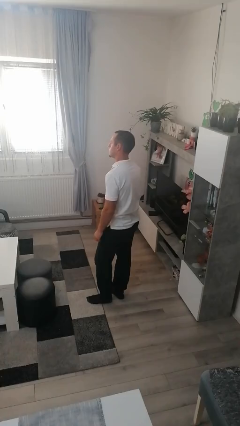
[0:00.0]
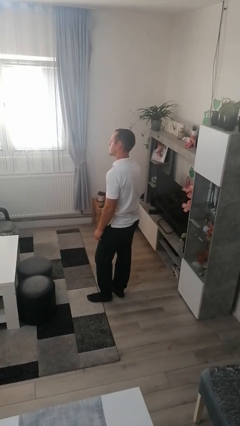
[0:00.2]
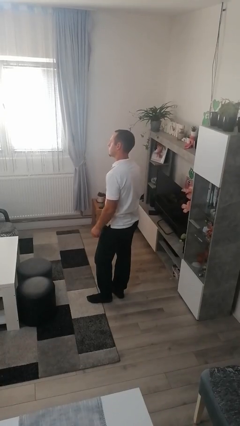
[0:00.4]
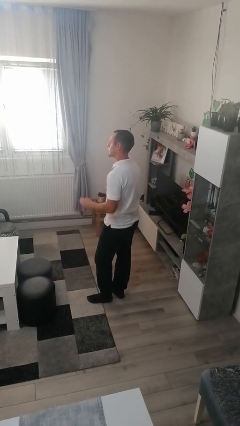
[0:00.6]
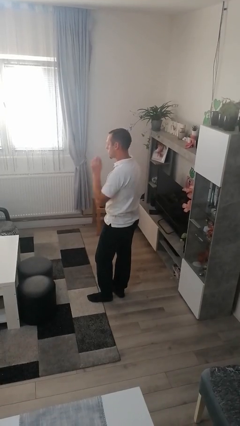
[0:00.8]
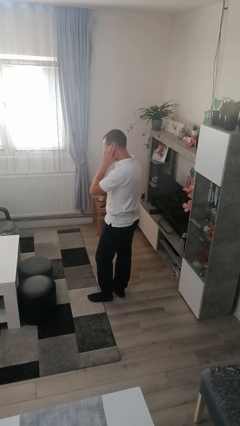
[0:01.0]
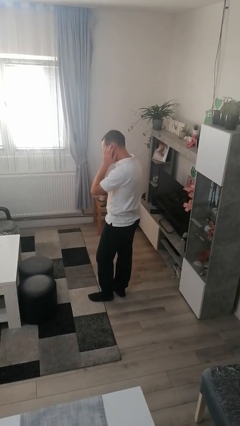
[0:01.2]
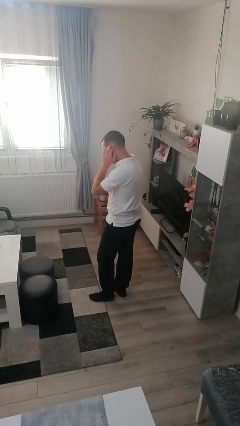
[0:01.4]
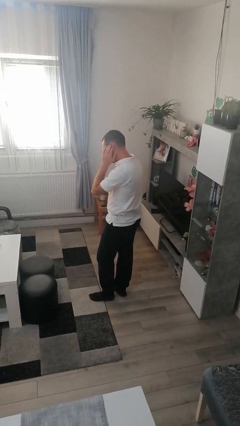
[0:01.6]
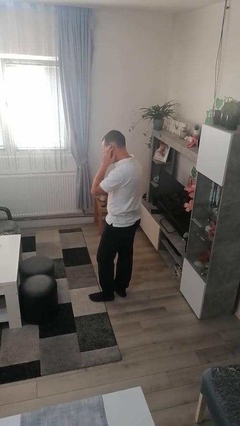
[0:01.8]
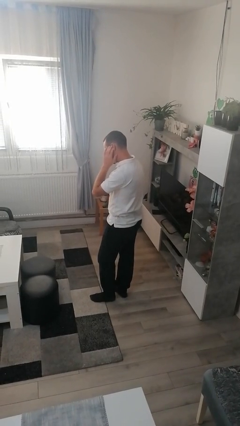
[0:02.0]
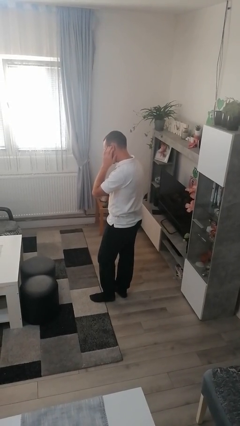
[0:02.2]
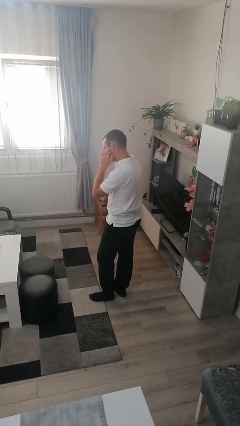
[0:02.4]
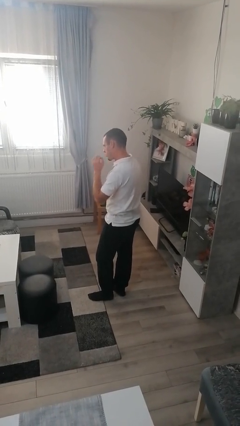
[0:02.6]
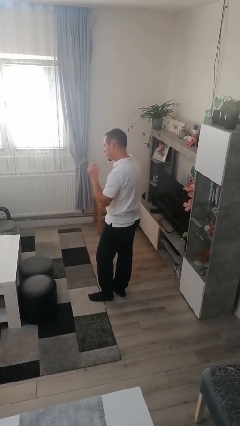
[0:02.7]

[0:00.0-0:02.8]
person touches earlobe

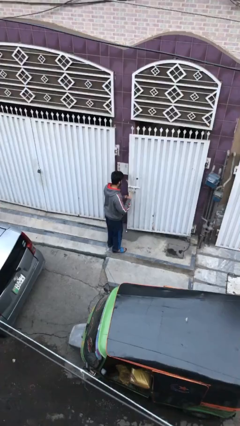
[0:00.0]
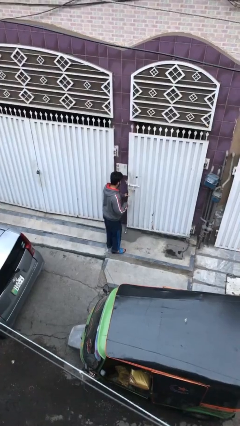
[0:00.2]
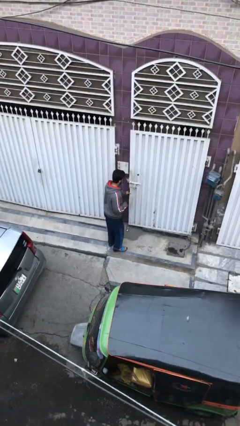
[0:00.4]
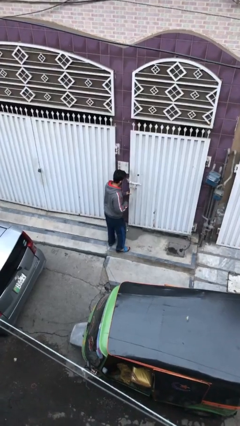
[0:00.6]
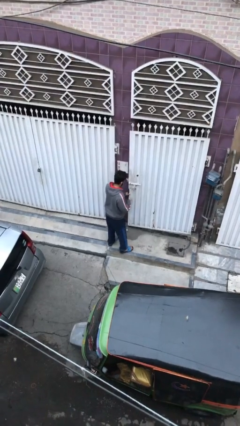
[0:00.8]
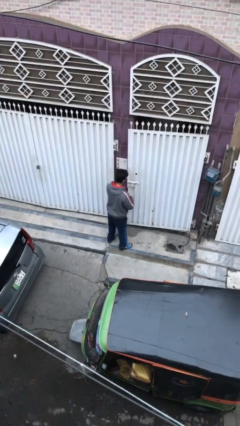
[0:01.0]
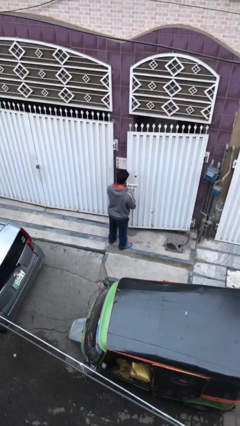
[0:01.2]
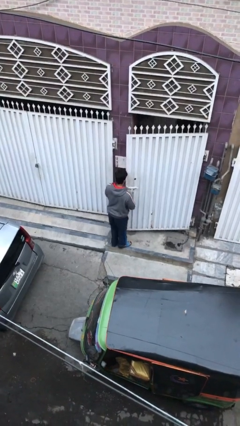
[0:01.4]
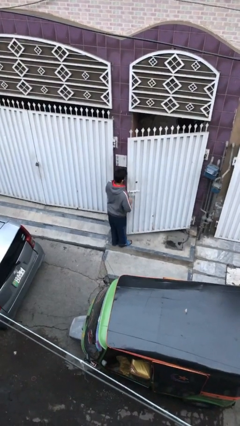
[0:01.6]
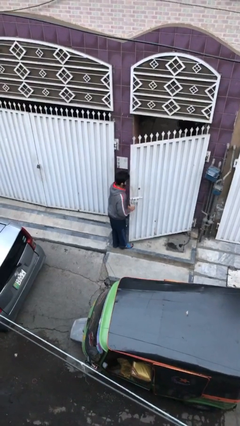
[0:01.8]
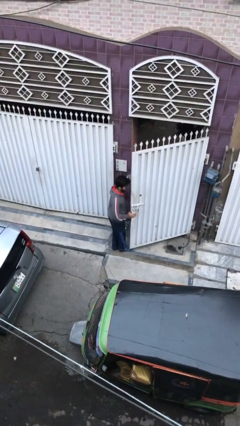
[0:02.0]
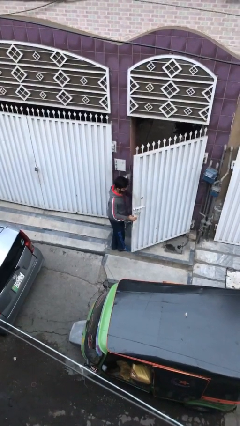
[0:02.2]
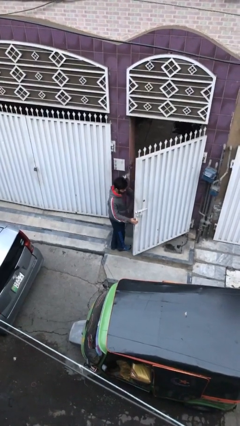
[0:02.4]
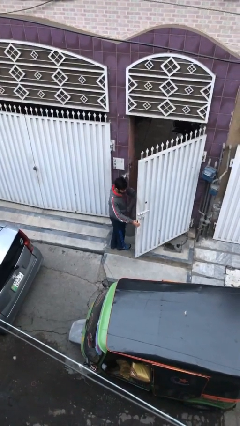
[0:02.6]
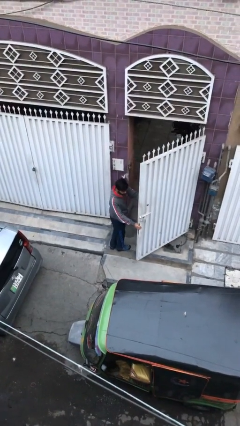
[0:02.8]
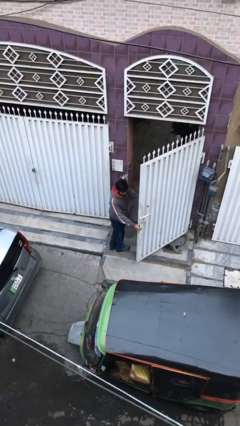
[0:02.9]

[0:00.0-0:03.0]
person opens facility door

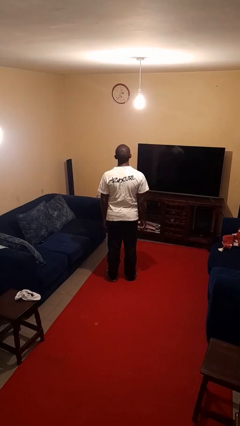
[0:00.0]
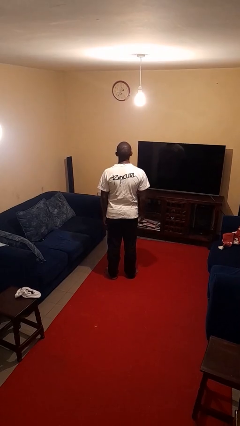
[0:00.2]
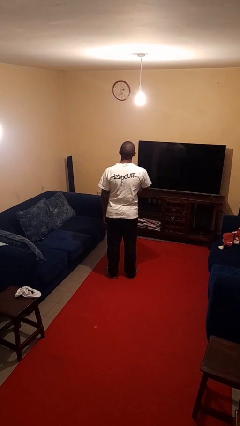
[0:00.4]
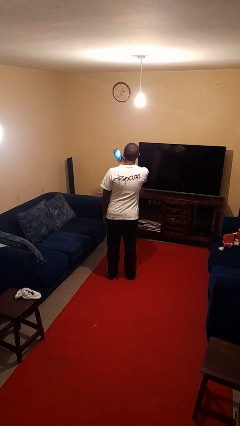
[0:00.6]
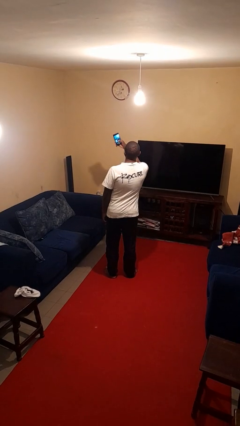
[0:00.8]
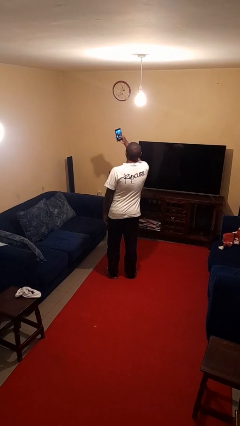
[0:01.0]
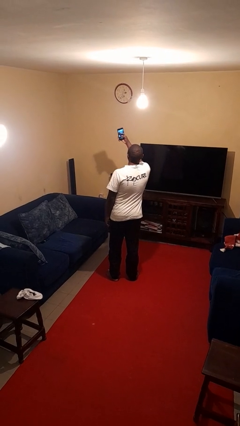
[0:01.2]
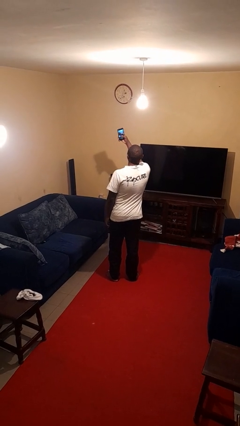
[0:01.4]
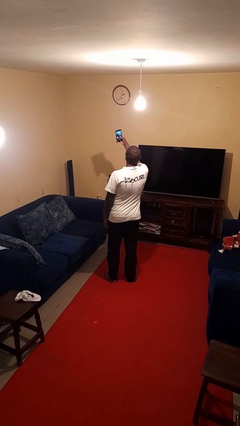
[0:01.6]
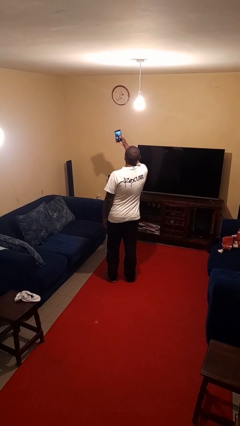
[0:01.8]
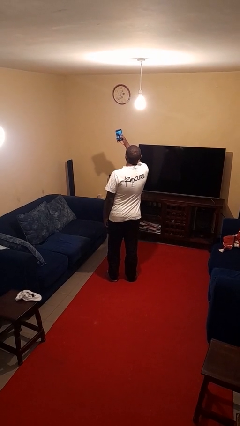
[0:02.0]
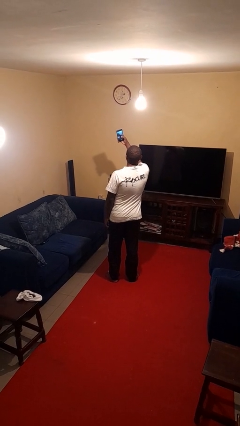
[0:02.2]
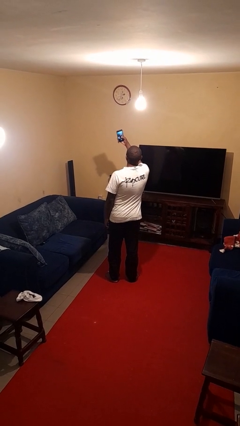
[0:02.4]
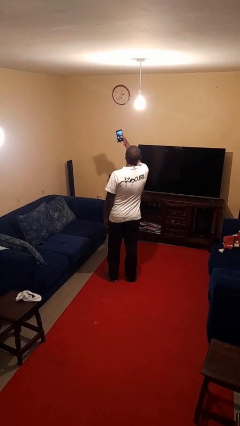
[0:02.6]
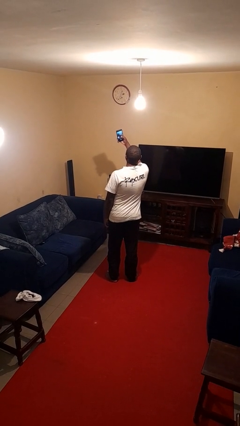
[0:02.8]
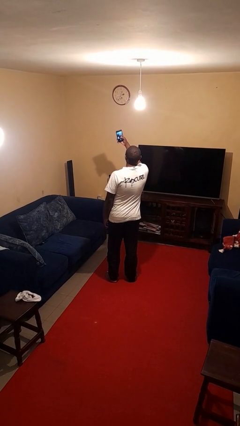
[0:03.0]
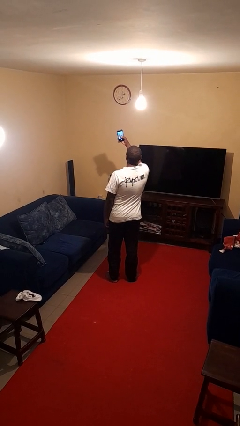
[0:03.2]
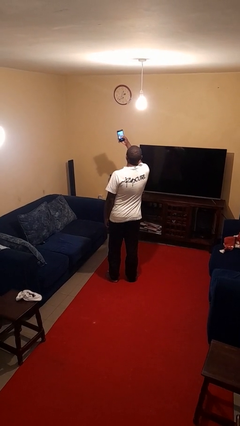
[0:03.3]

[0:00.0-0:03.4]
person takes selfie

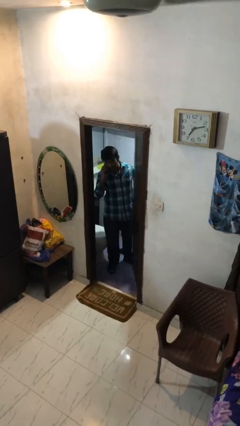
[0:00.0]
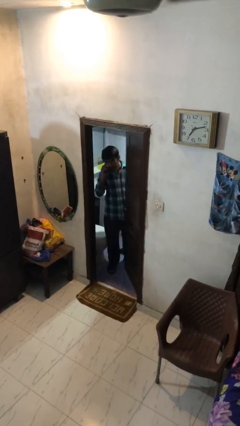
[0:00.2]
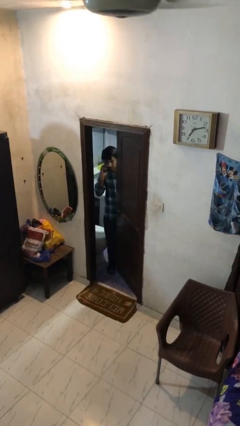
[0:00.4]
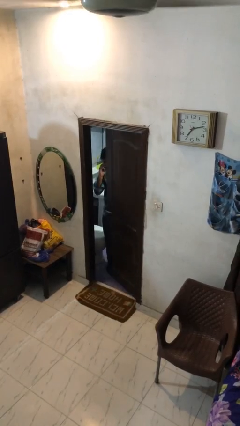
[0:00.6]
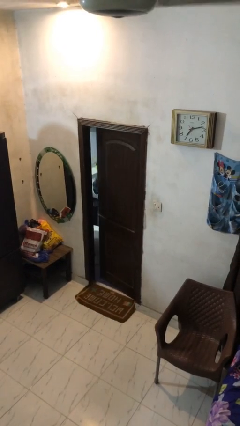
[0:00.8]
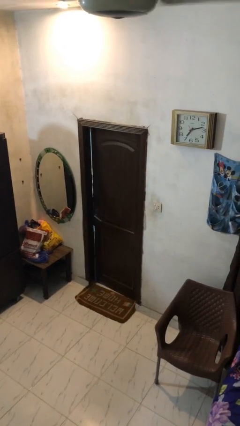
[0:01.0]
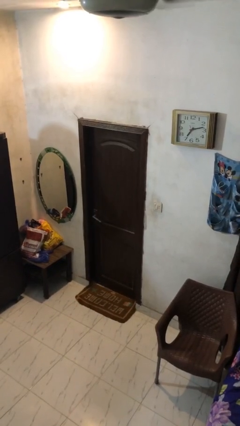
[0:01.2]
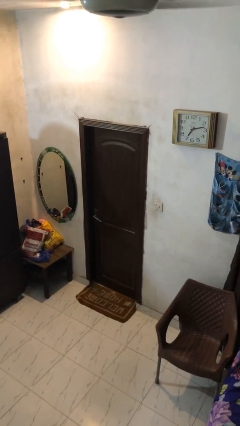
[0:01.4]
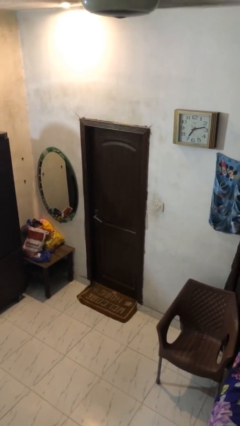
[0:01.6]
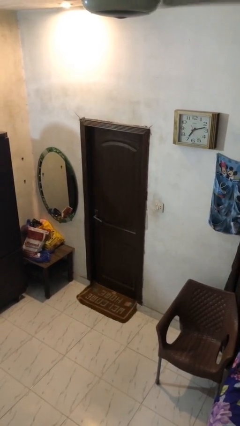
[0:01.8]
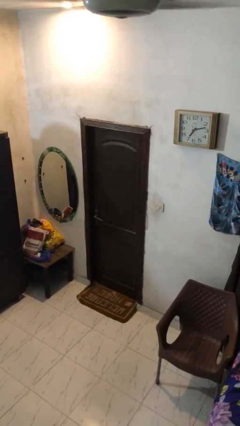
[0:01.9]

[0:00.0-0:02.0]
person closes facility door

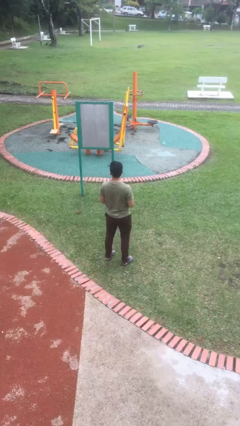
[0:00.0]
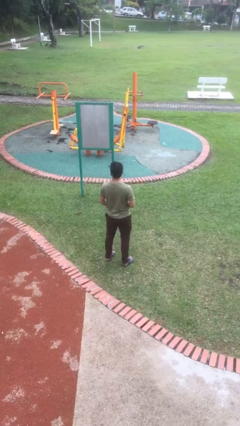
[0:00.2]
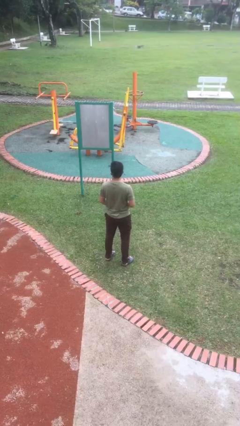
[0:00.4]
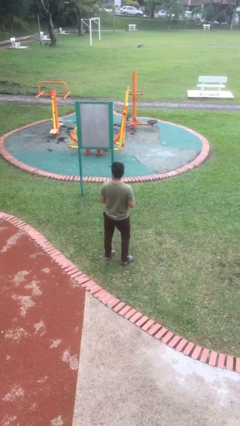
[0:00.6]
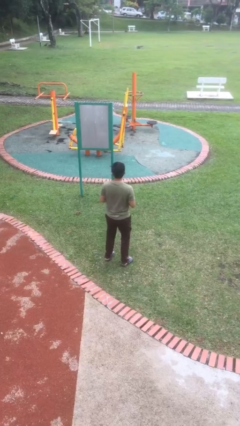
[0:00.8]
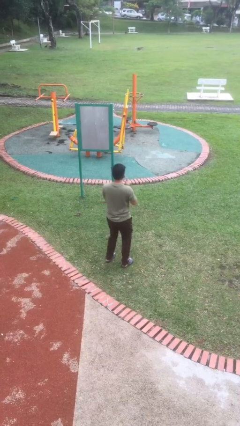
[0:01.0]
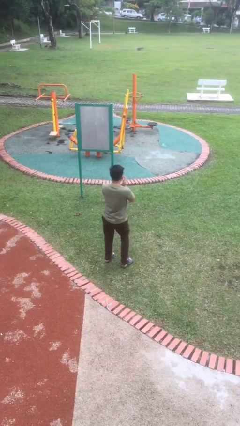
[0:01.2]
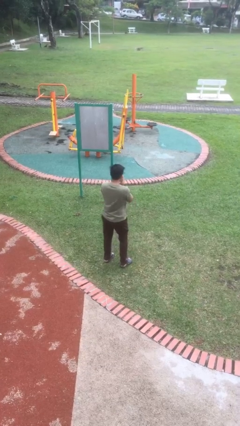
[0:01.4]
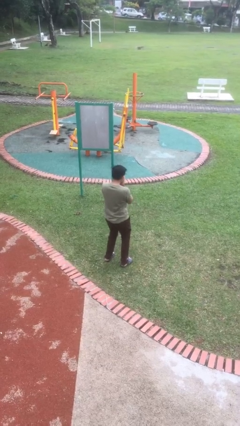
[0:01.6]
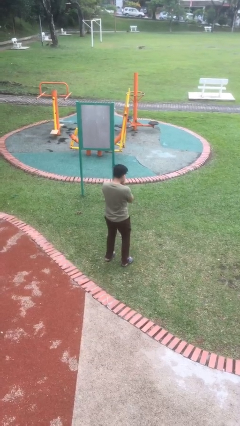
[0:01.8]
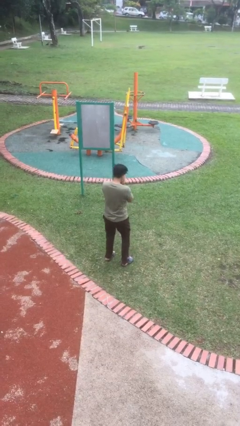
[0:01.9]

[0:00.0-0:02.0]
person wiggles hips

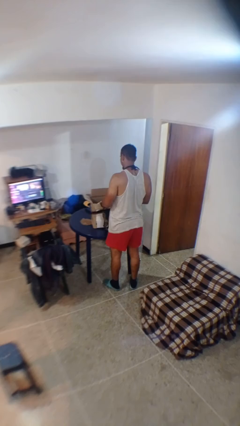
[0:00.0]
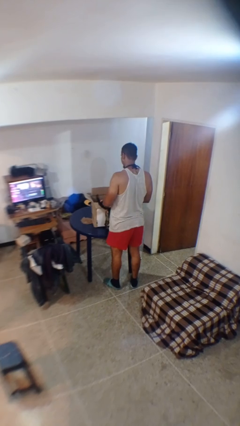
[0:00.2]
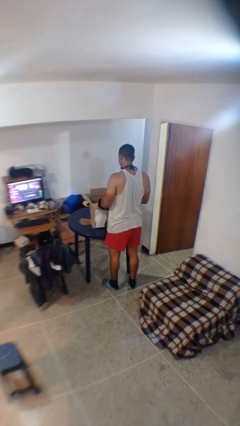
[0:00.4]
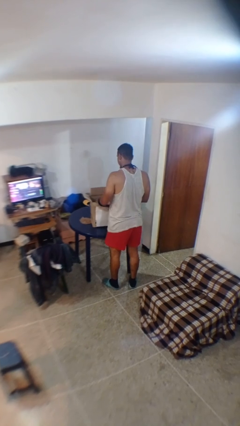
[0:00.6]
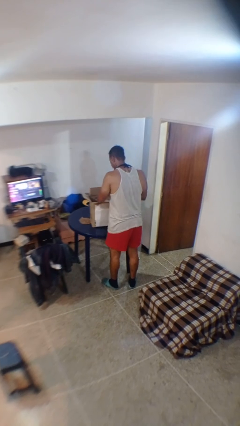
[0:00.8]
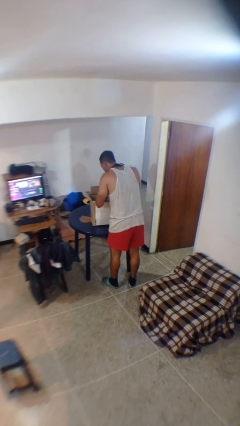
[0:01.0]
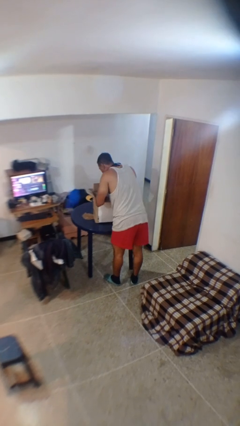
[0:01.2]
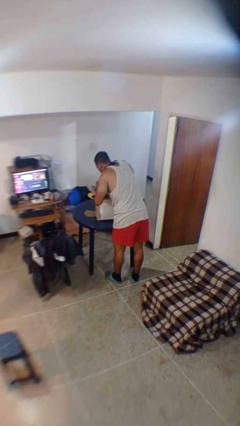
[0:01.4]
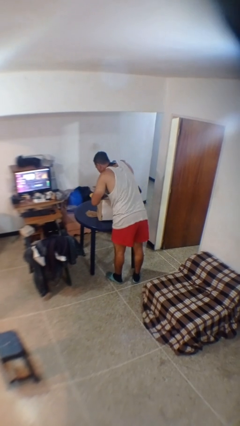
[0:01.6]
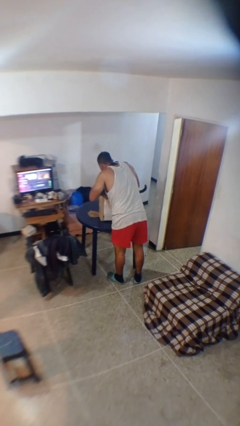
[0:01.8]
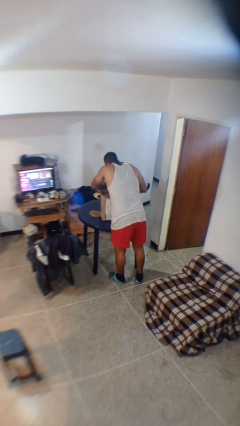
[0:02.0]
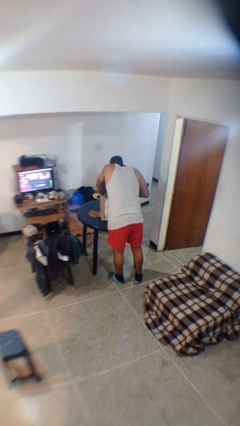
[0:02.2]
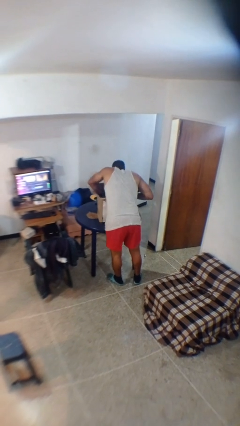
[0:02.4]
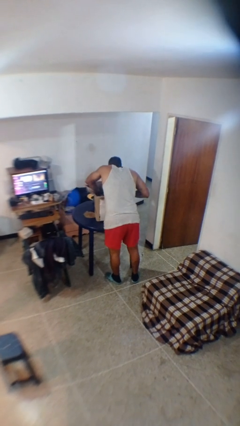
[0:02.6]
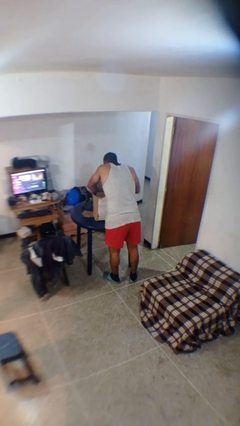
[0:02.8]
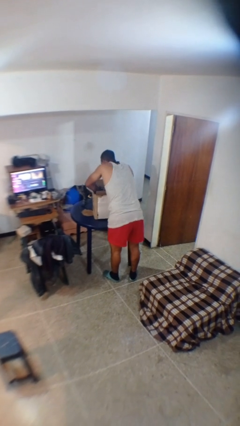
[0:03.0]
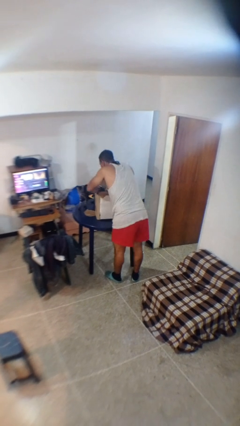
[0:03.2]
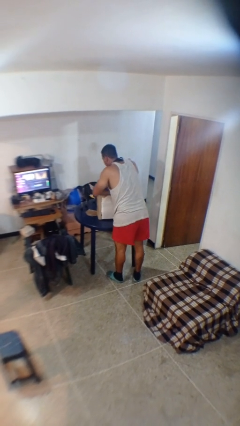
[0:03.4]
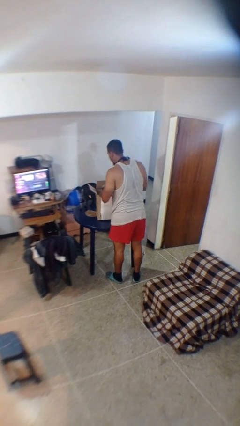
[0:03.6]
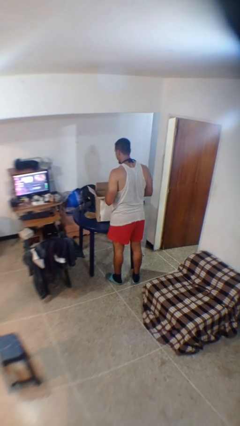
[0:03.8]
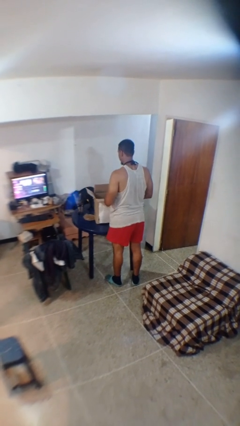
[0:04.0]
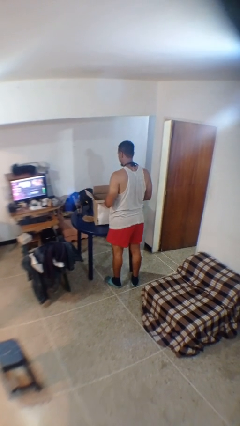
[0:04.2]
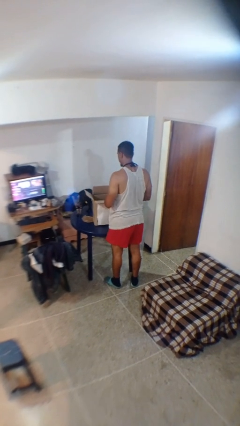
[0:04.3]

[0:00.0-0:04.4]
person searches in box
